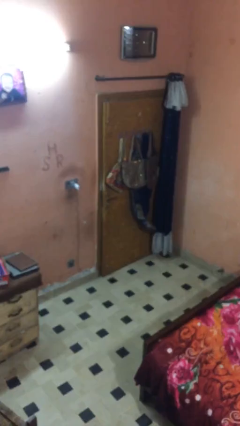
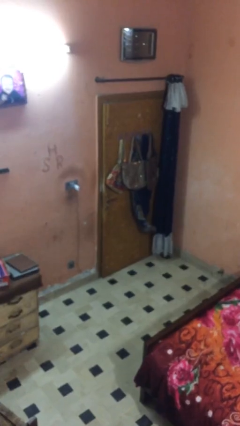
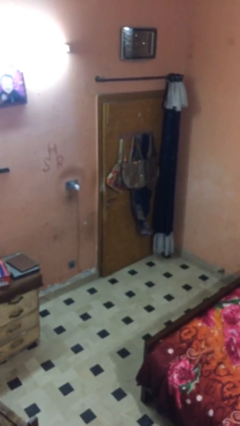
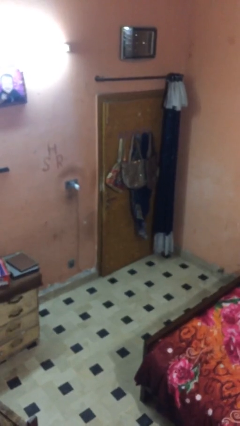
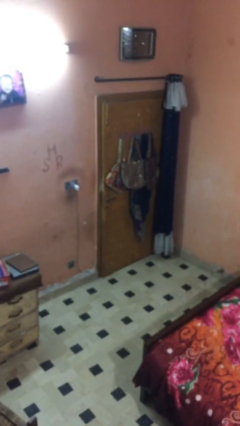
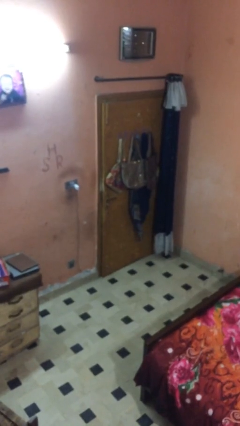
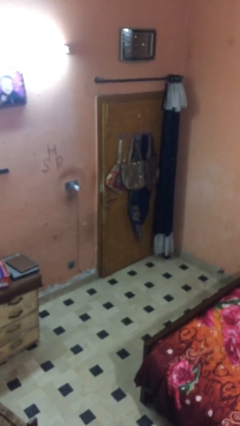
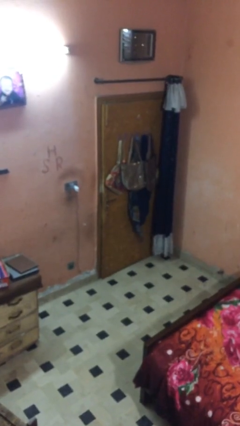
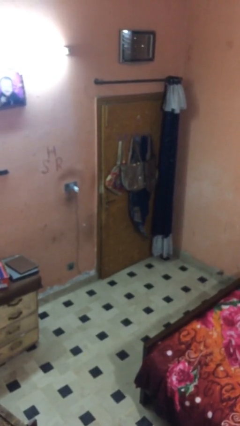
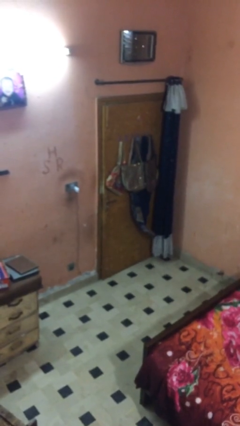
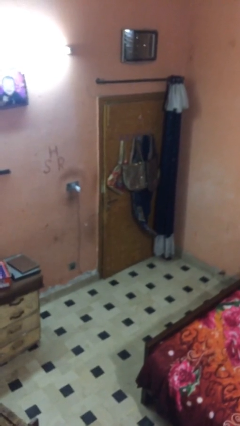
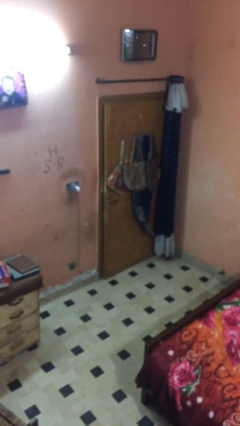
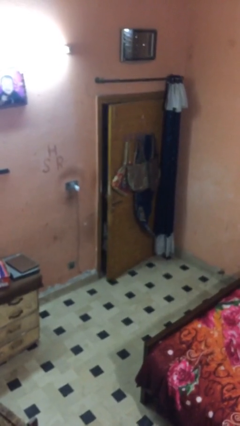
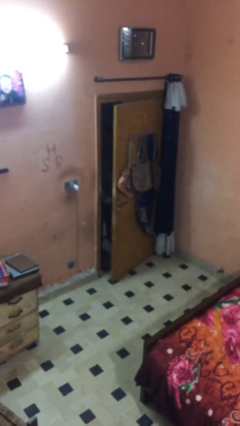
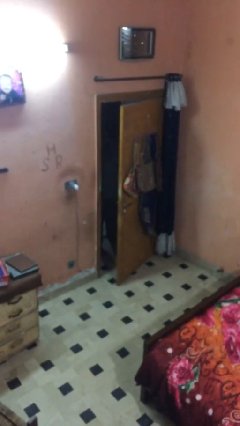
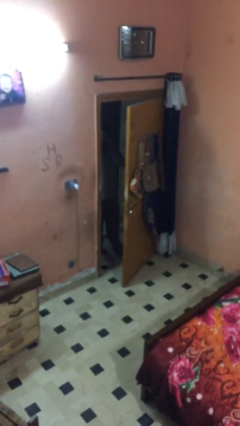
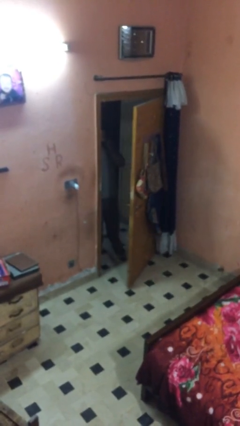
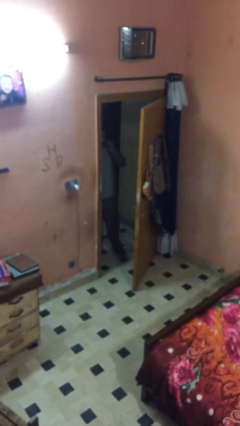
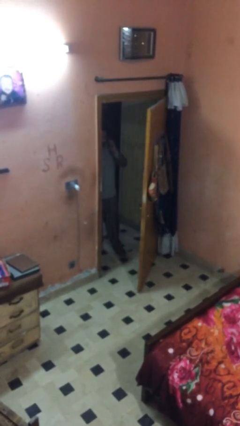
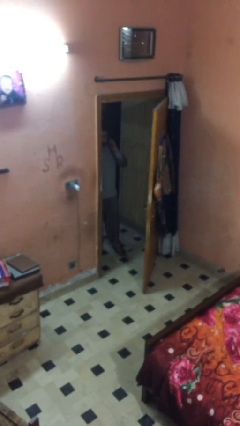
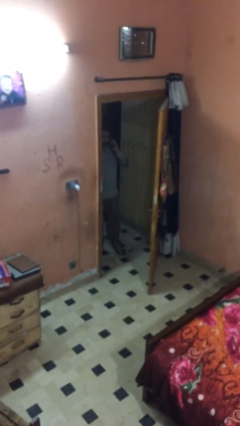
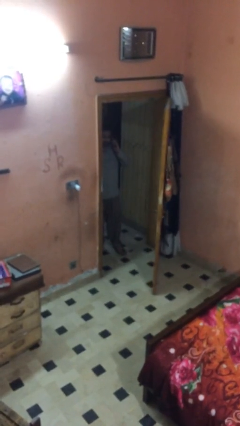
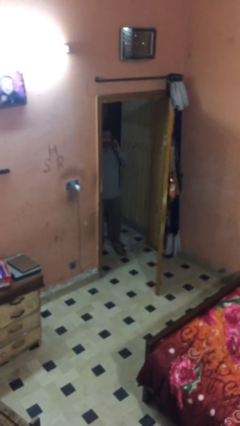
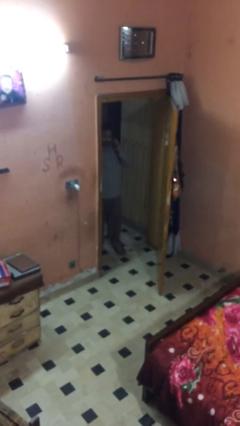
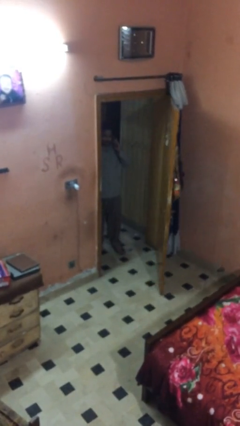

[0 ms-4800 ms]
person opens facility door

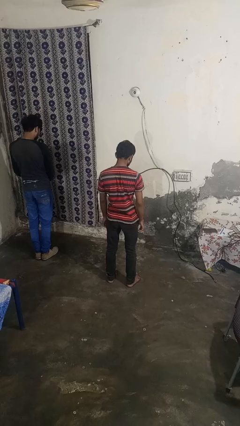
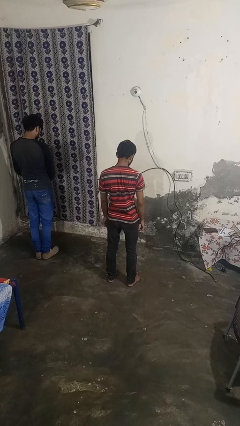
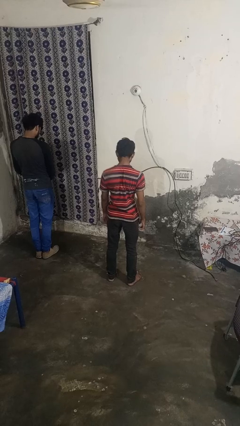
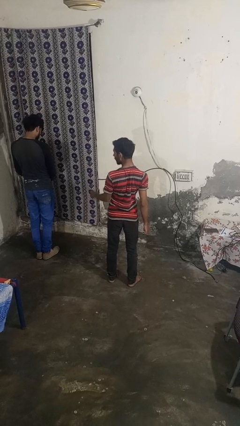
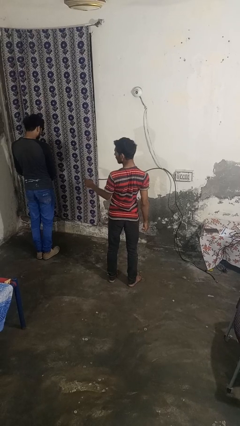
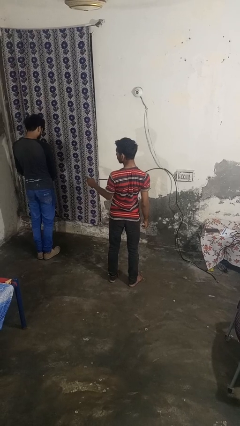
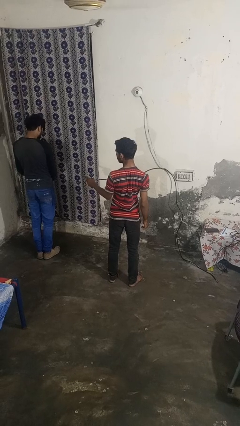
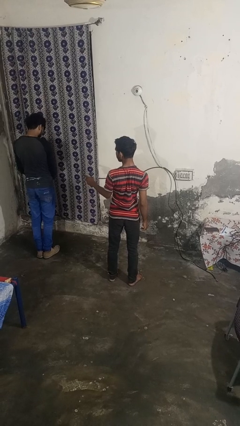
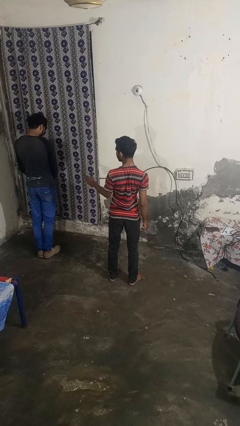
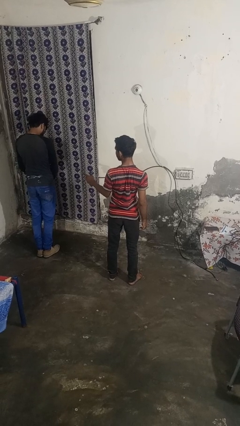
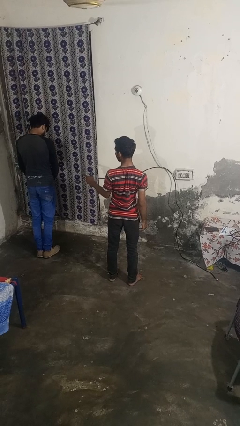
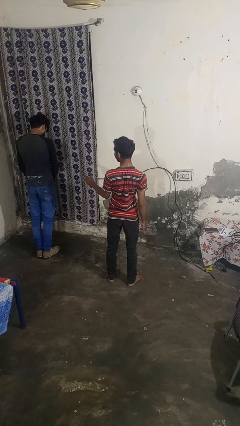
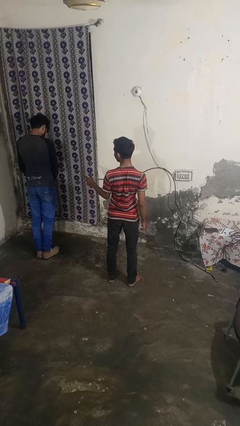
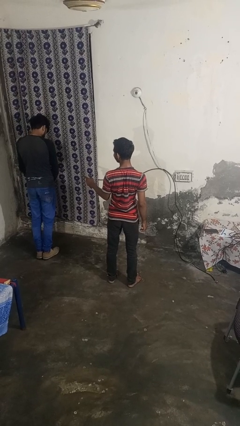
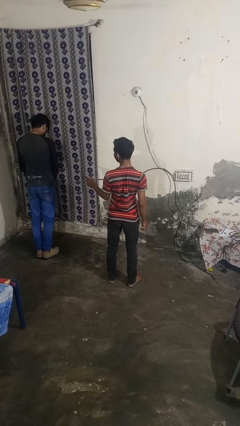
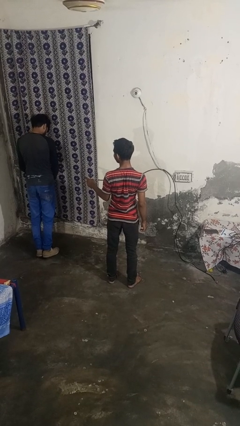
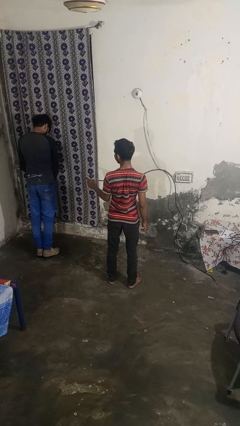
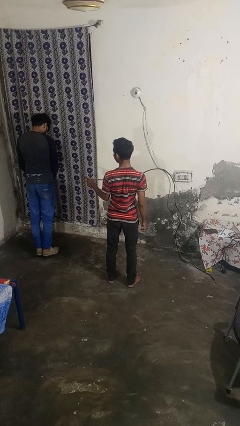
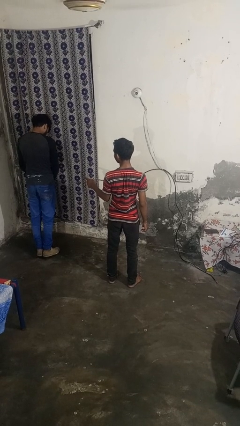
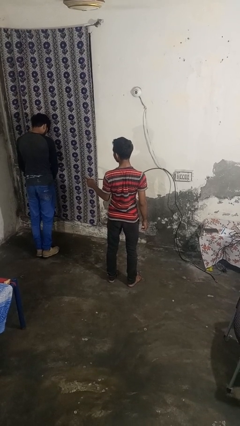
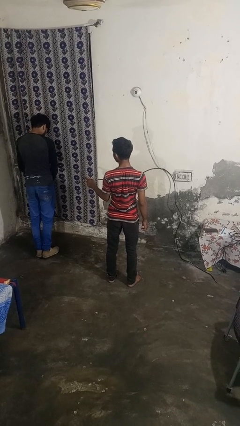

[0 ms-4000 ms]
person points at person

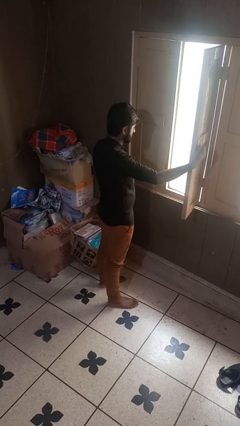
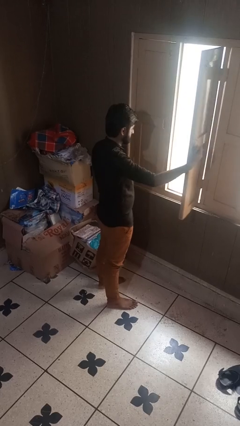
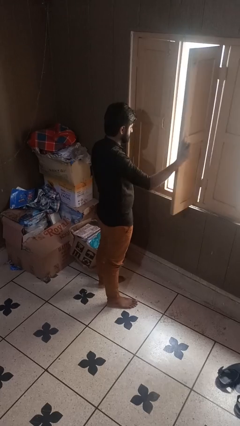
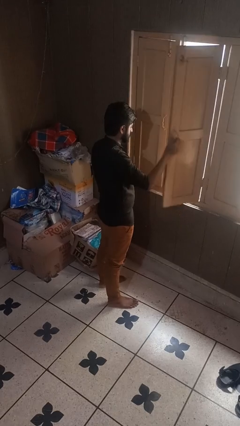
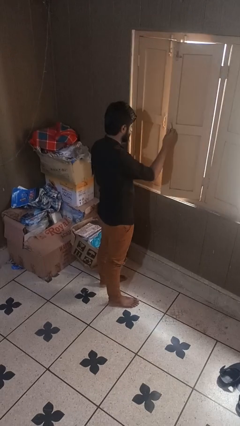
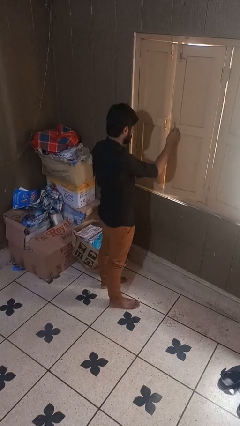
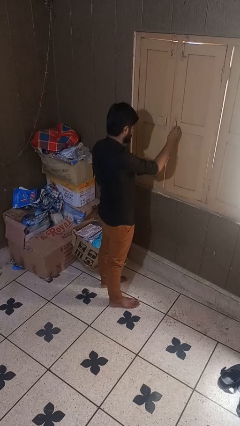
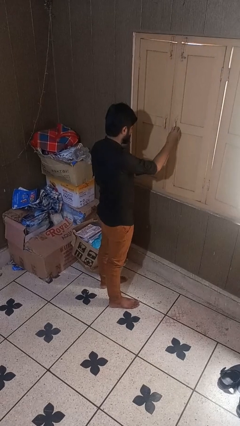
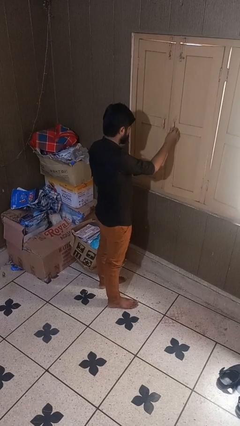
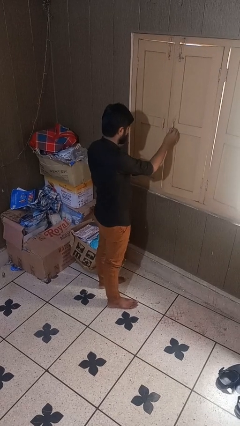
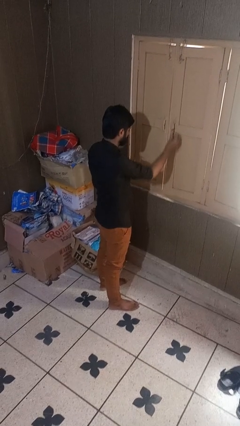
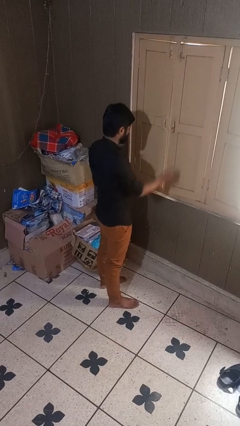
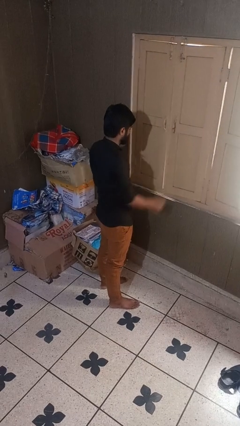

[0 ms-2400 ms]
person closes home window

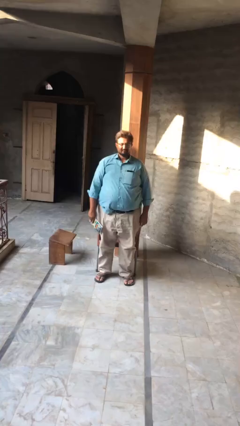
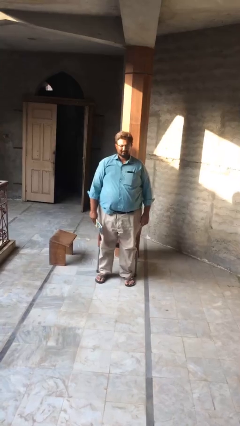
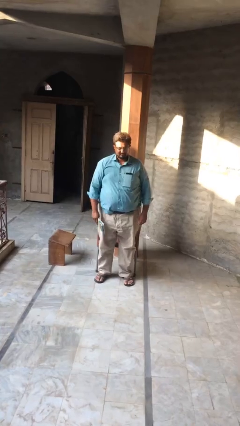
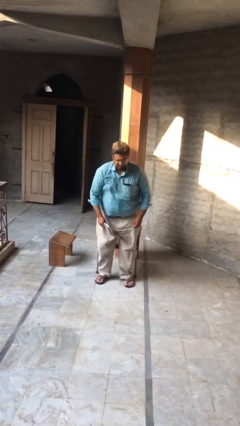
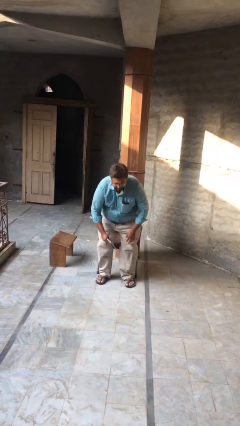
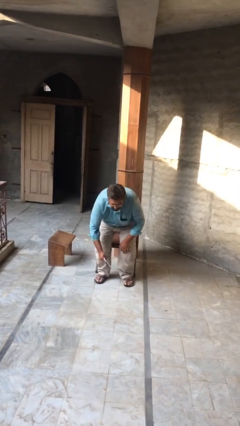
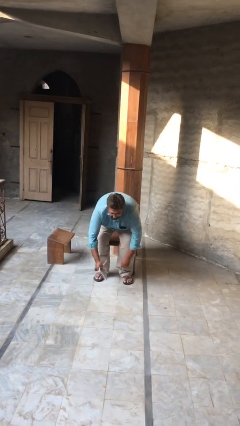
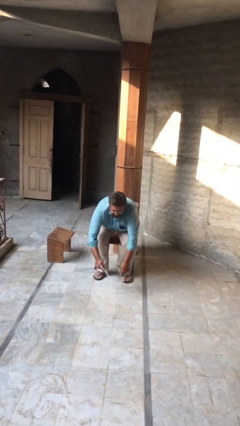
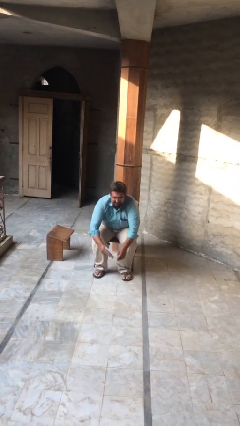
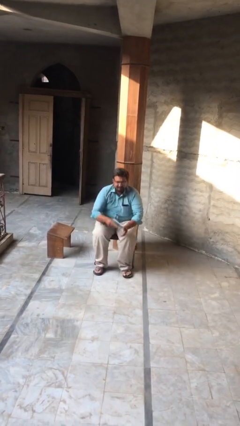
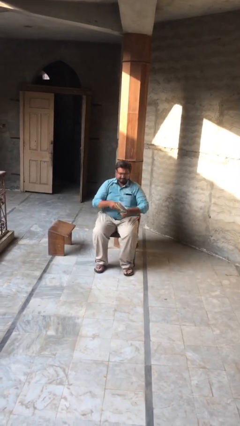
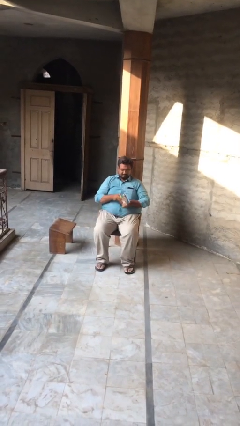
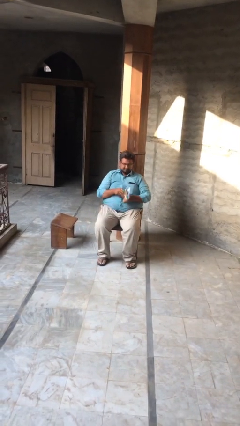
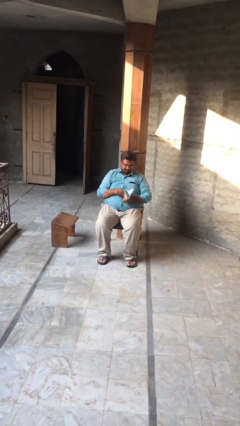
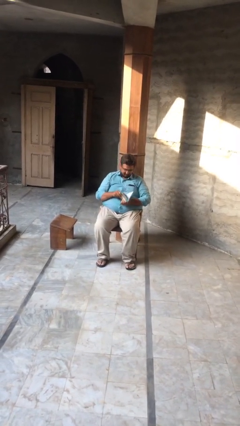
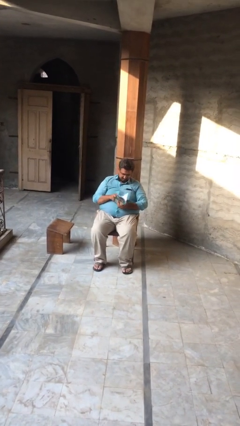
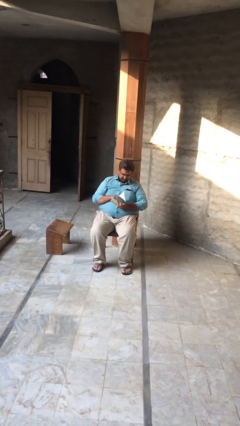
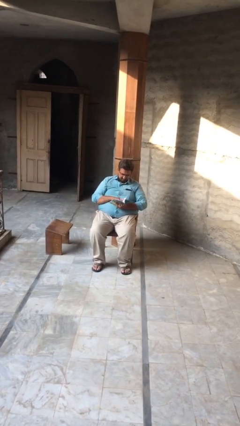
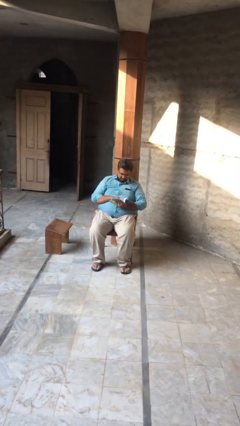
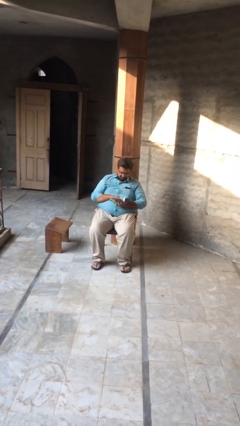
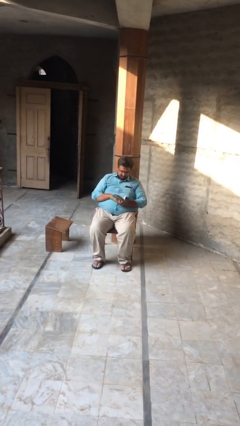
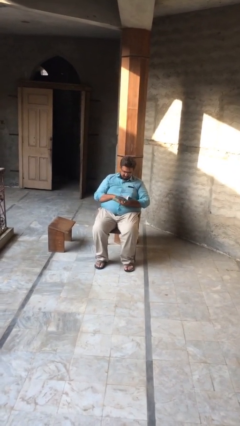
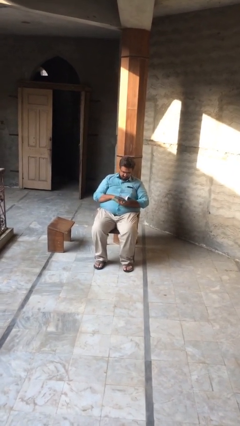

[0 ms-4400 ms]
person sits down

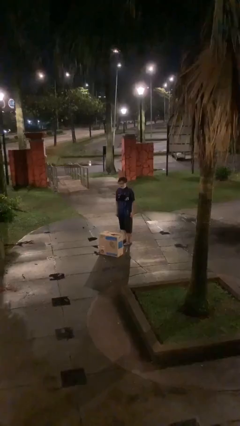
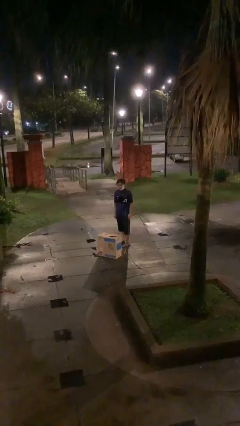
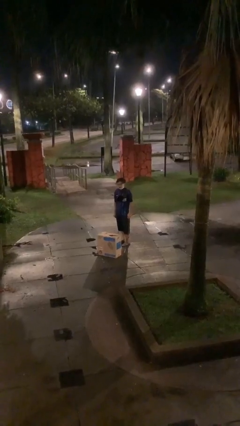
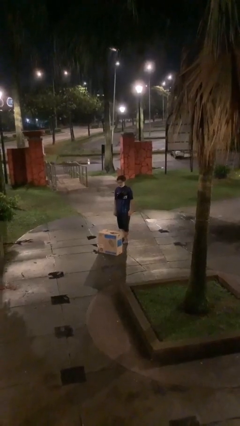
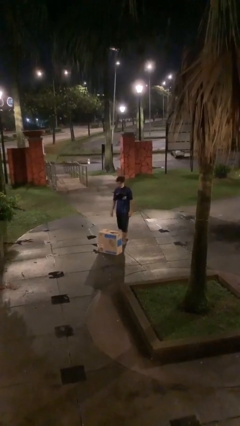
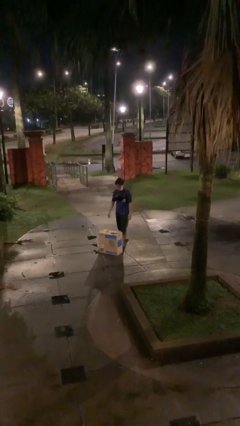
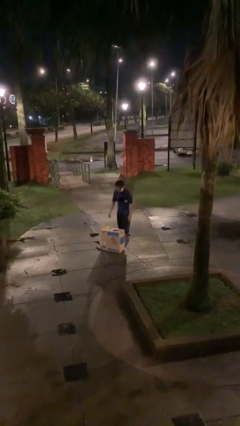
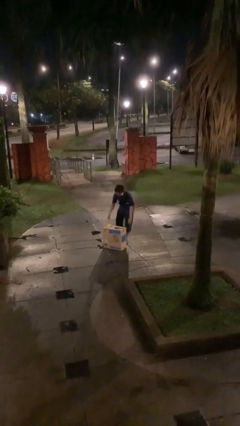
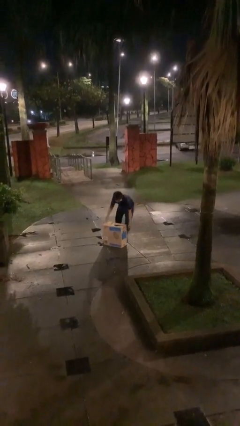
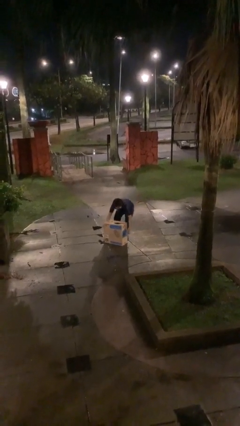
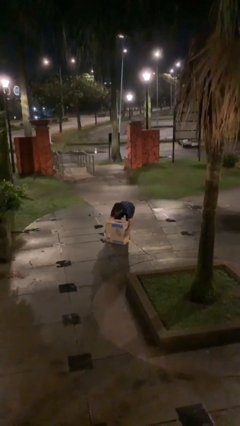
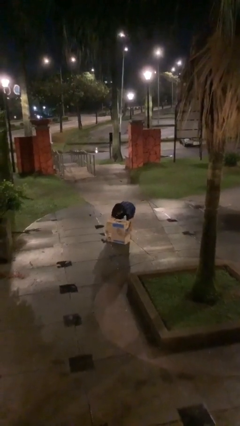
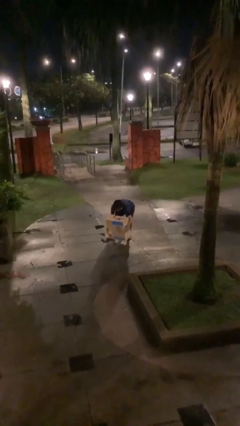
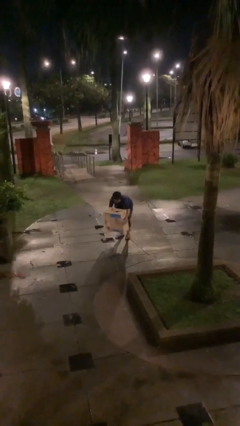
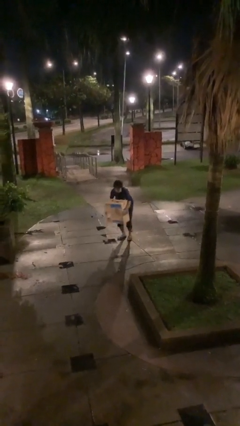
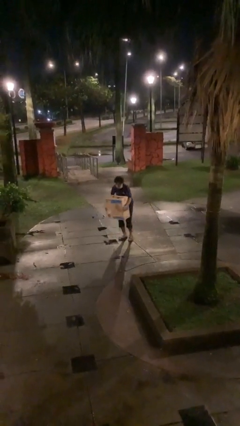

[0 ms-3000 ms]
person picks up object from floor
